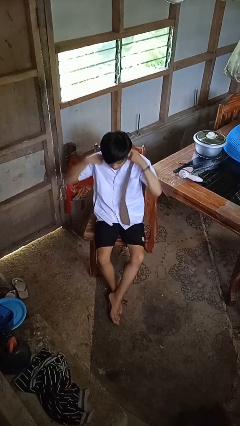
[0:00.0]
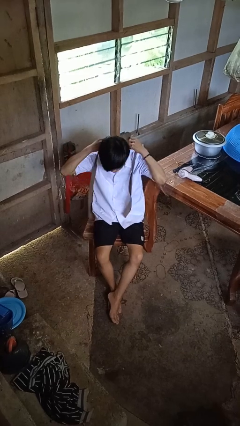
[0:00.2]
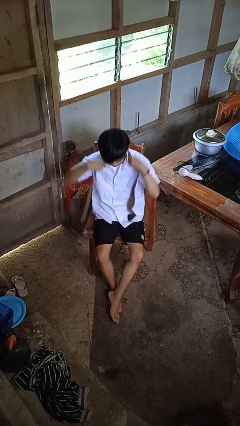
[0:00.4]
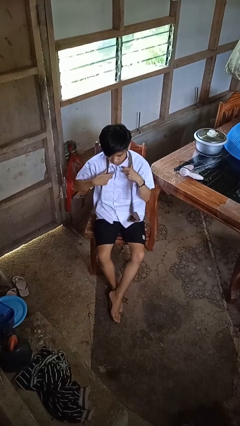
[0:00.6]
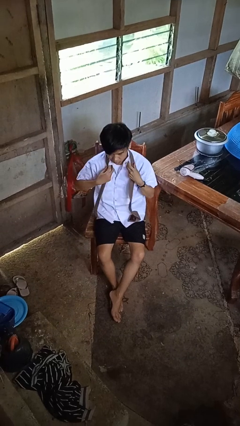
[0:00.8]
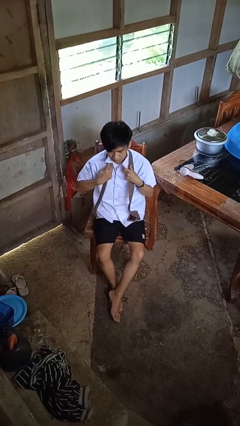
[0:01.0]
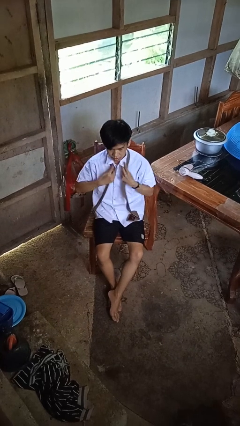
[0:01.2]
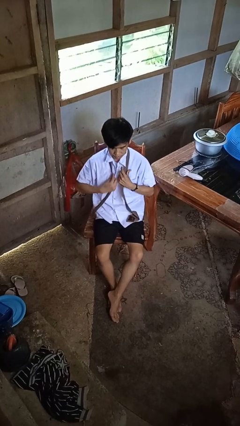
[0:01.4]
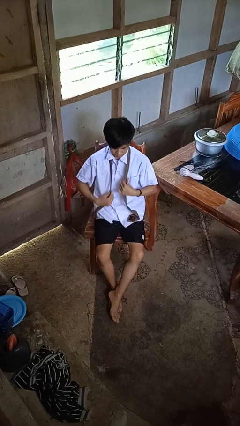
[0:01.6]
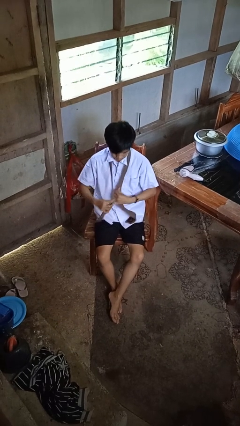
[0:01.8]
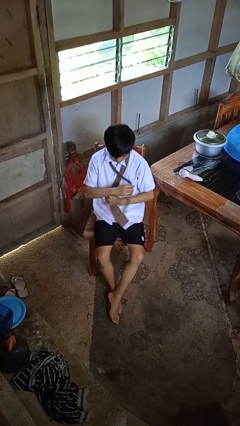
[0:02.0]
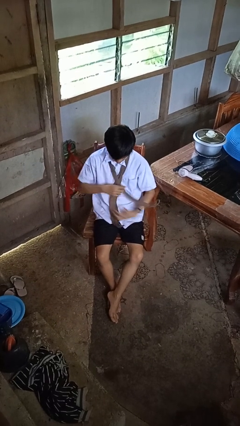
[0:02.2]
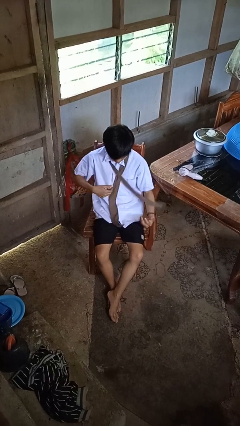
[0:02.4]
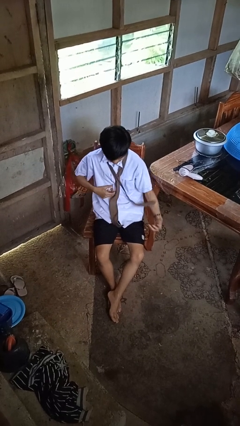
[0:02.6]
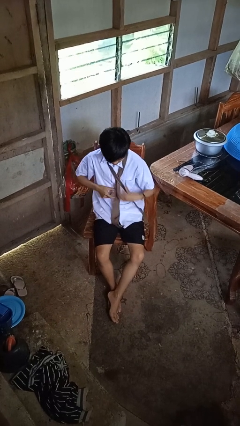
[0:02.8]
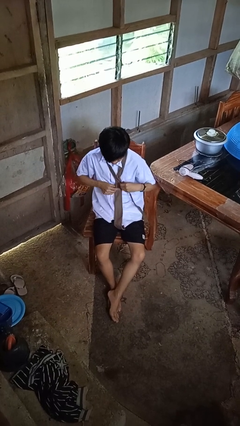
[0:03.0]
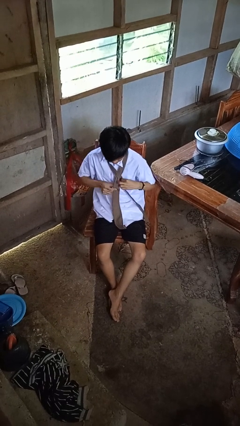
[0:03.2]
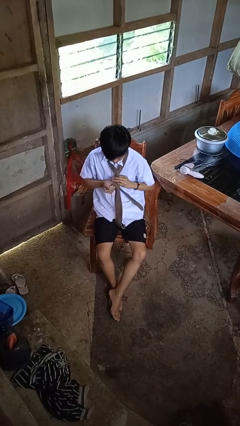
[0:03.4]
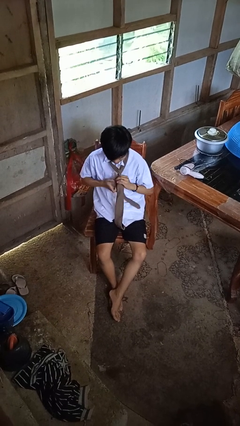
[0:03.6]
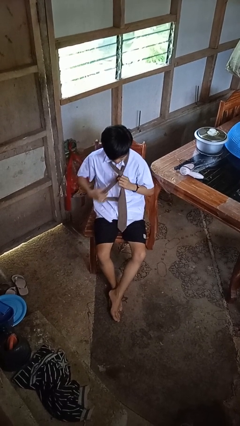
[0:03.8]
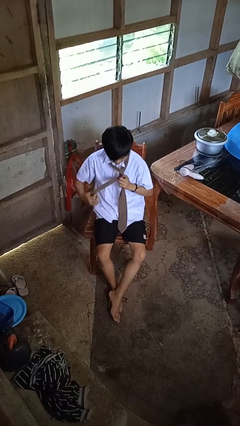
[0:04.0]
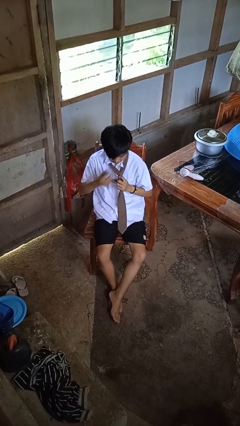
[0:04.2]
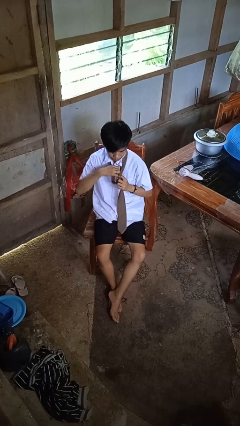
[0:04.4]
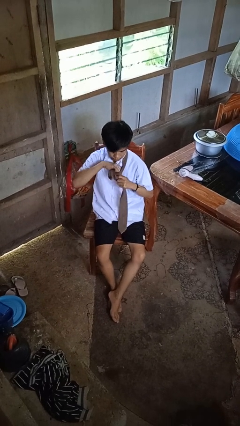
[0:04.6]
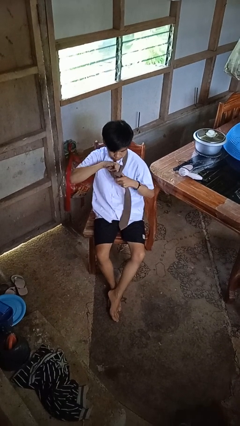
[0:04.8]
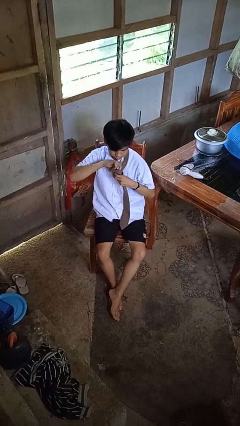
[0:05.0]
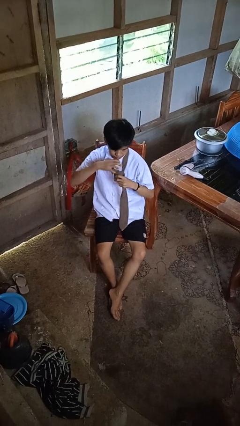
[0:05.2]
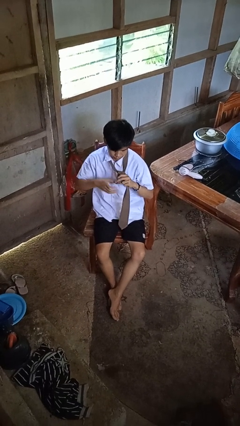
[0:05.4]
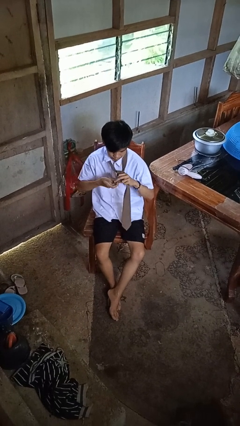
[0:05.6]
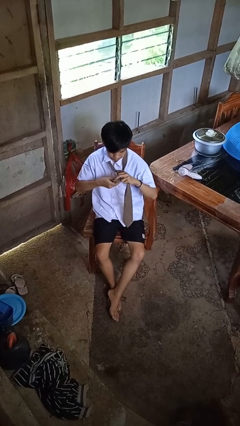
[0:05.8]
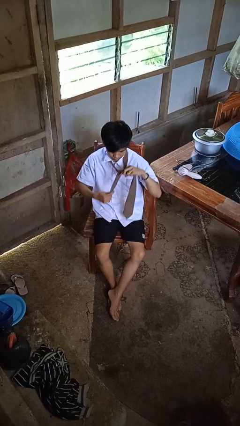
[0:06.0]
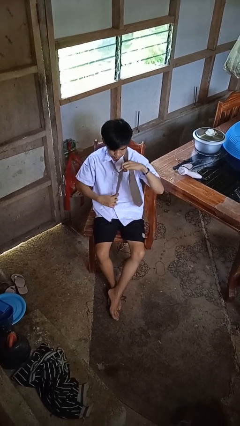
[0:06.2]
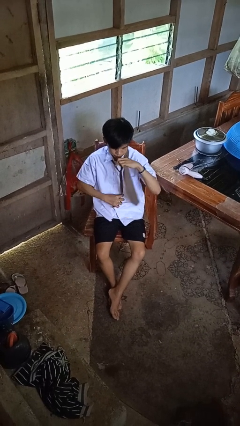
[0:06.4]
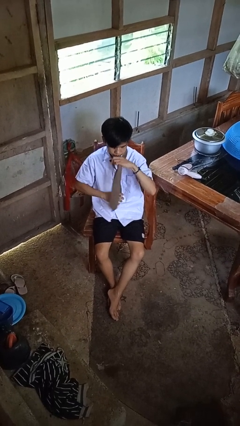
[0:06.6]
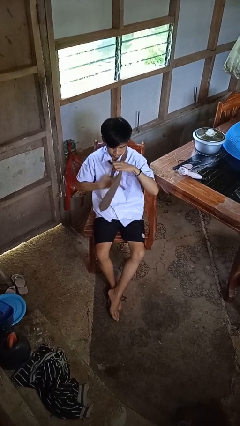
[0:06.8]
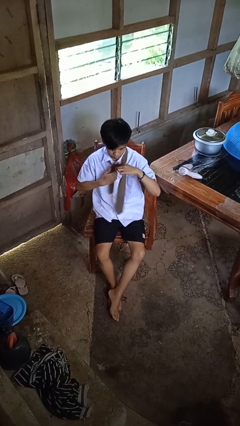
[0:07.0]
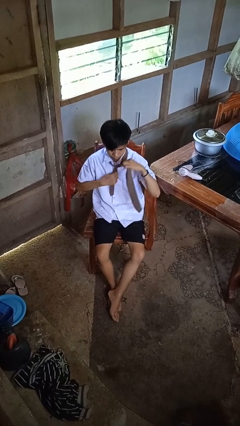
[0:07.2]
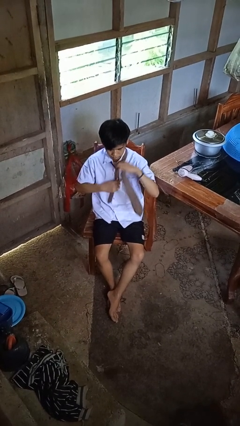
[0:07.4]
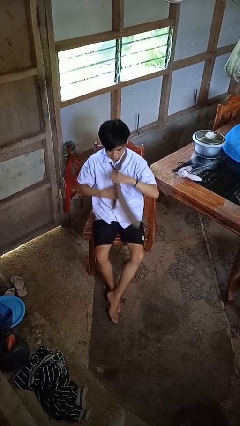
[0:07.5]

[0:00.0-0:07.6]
person puts on necktie

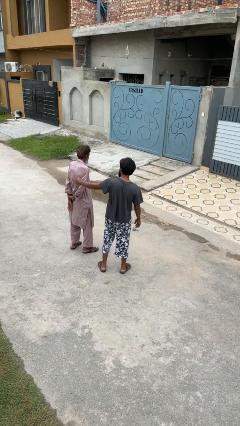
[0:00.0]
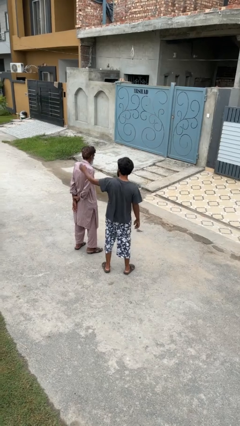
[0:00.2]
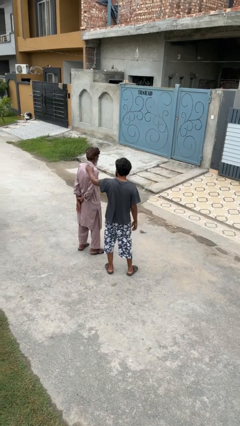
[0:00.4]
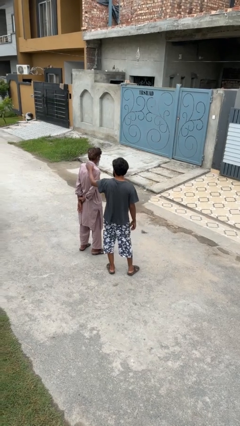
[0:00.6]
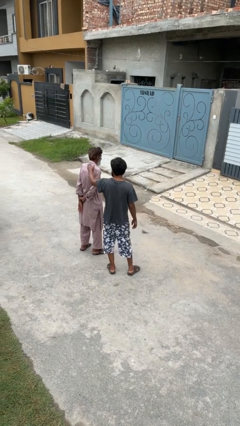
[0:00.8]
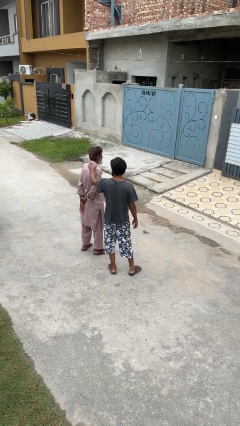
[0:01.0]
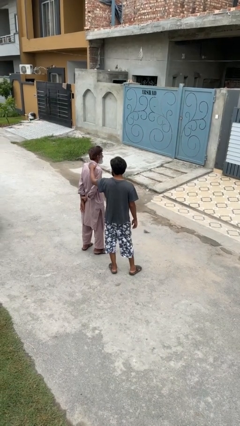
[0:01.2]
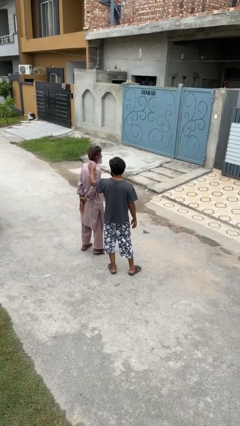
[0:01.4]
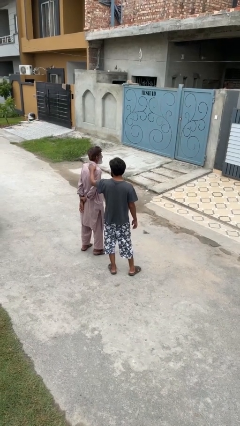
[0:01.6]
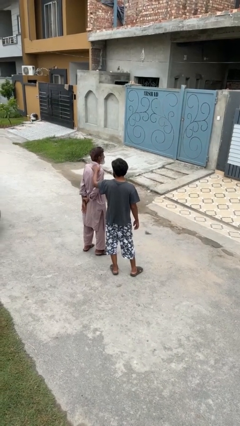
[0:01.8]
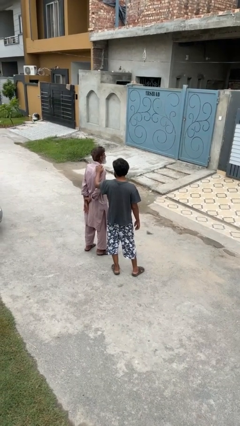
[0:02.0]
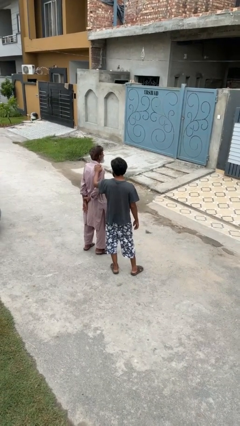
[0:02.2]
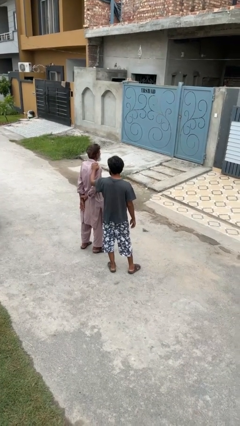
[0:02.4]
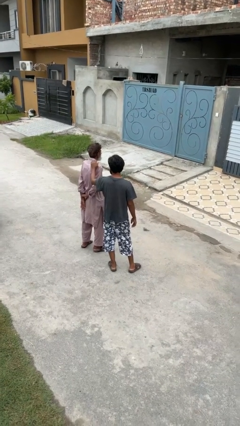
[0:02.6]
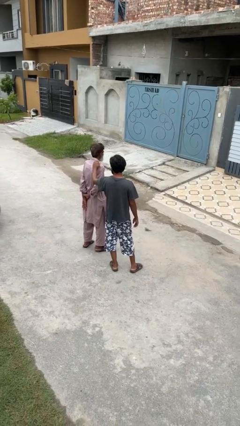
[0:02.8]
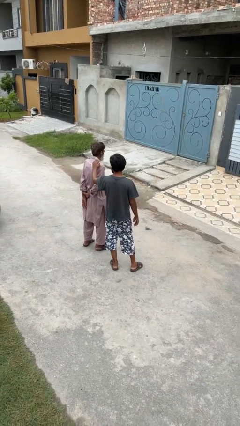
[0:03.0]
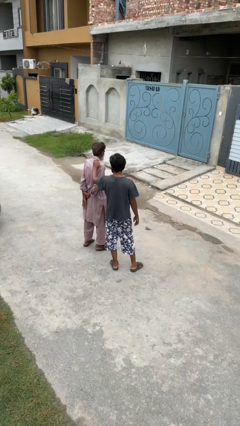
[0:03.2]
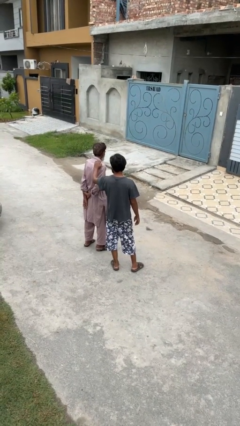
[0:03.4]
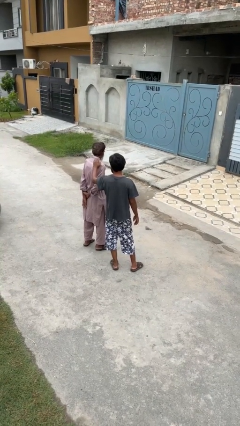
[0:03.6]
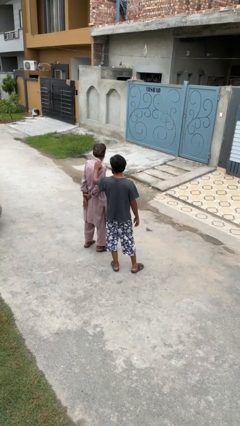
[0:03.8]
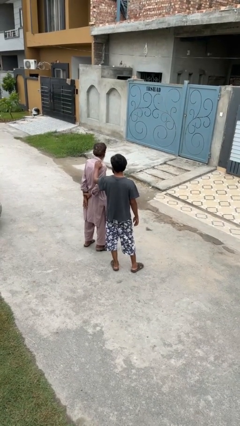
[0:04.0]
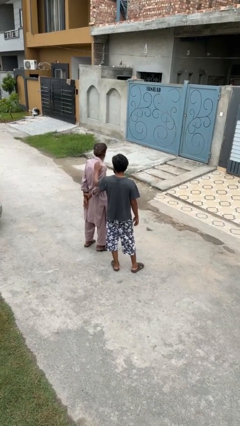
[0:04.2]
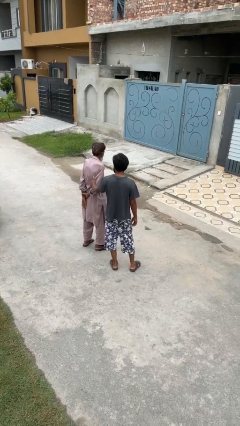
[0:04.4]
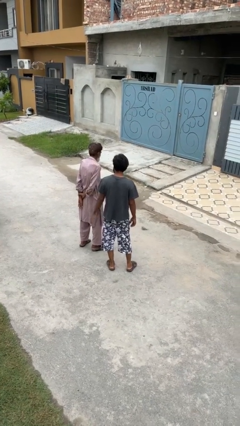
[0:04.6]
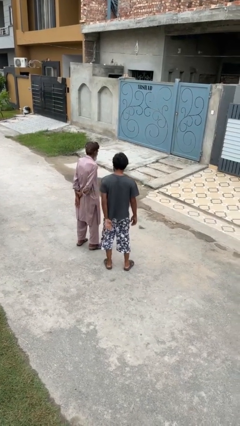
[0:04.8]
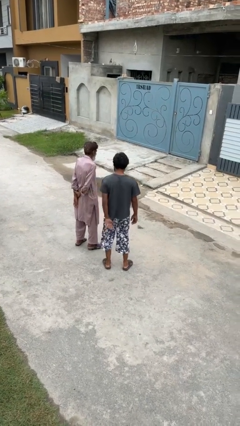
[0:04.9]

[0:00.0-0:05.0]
person pounds shoulders of person

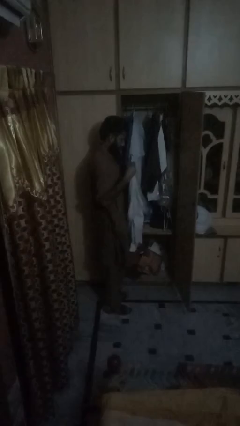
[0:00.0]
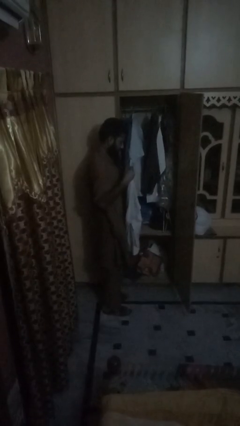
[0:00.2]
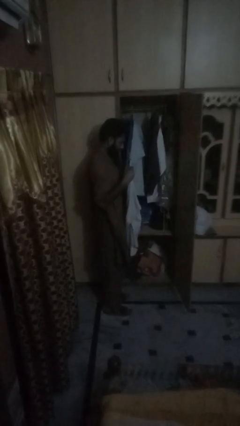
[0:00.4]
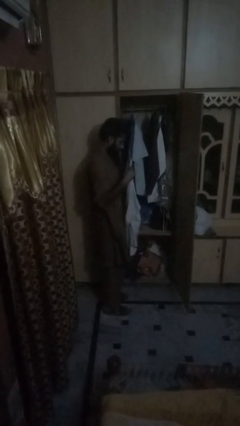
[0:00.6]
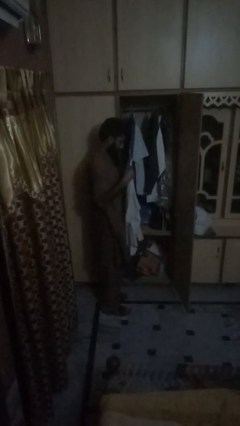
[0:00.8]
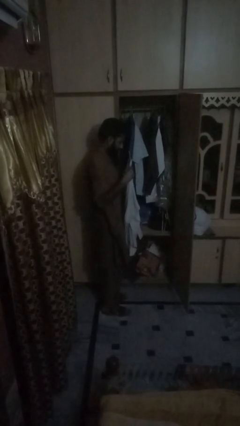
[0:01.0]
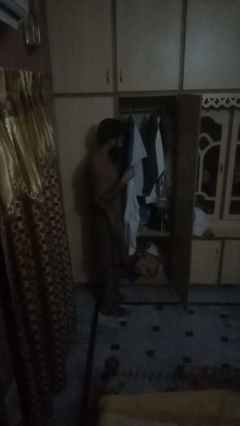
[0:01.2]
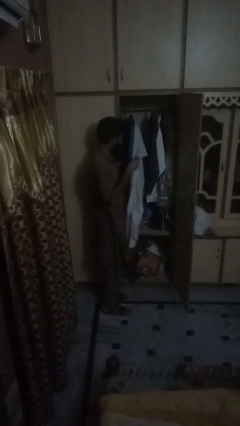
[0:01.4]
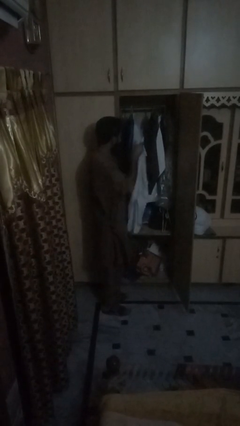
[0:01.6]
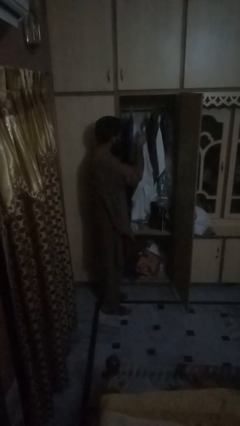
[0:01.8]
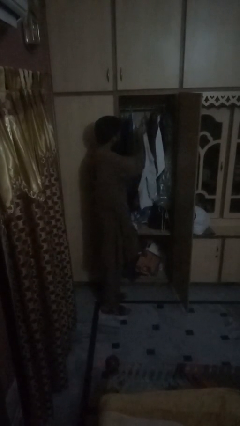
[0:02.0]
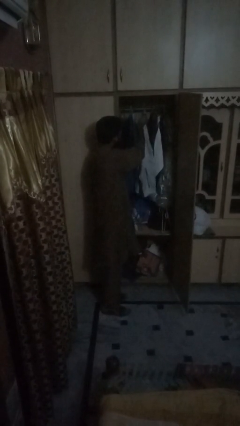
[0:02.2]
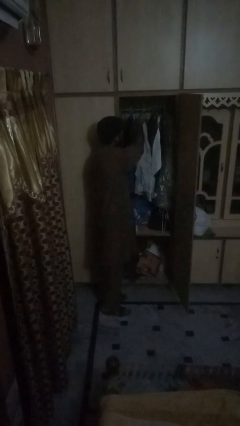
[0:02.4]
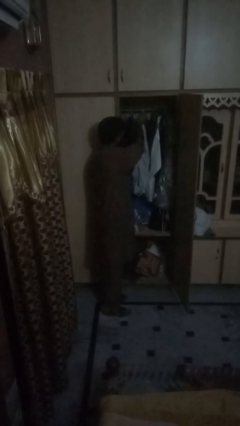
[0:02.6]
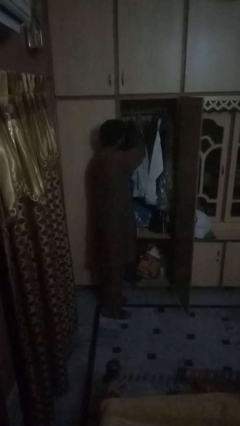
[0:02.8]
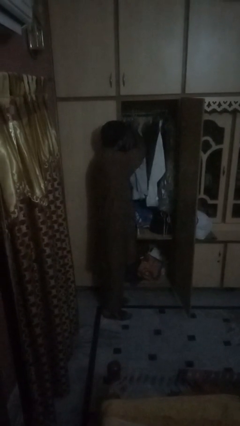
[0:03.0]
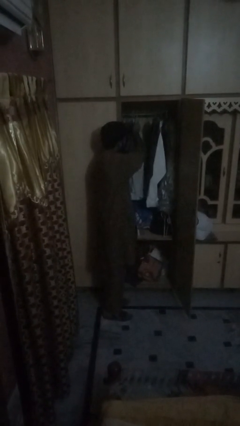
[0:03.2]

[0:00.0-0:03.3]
person takes clothes from dresser

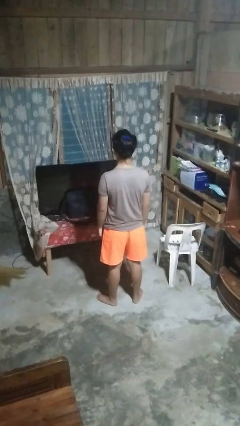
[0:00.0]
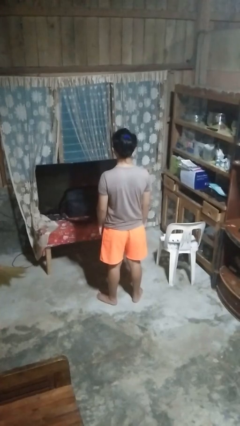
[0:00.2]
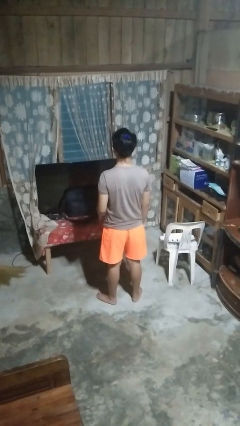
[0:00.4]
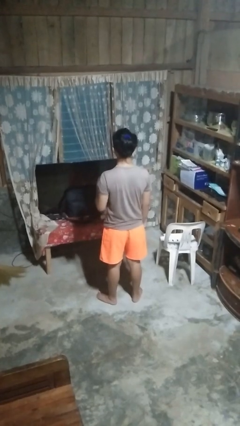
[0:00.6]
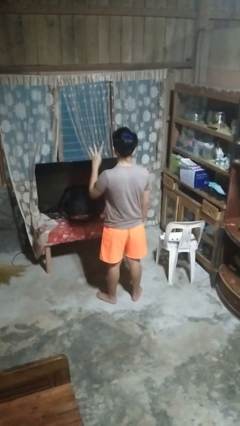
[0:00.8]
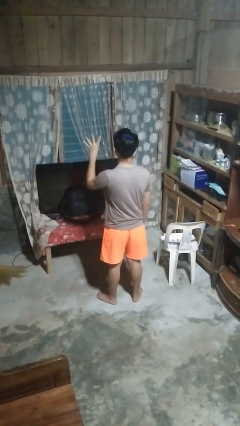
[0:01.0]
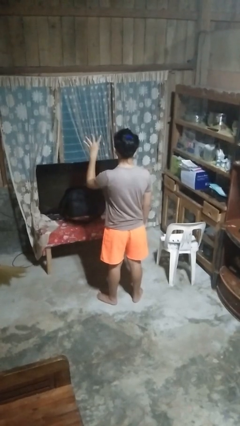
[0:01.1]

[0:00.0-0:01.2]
person gestures number four

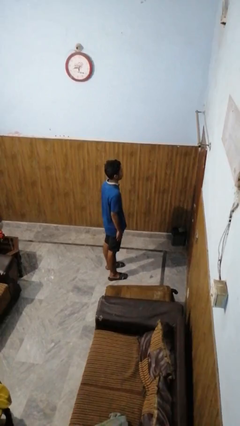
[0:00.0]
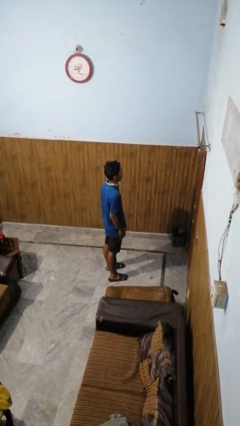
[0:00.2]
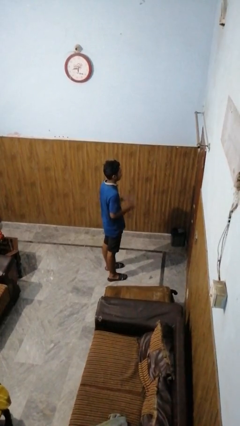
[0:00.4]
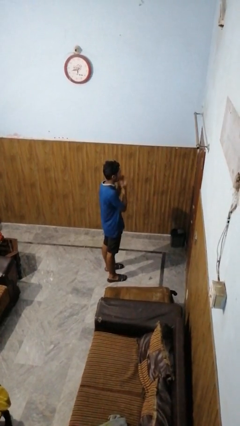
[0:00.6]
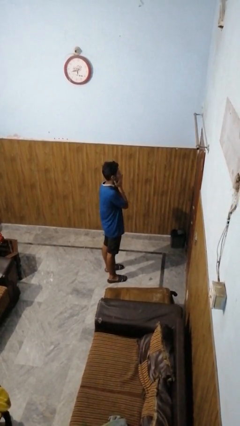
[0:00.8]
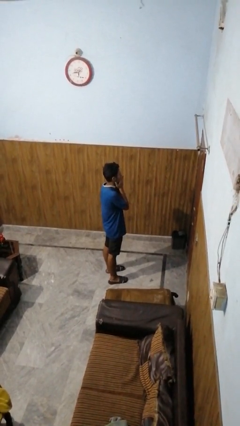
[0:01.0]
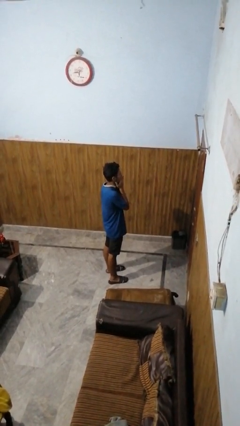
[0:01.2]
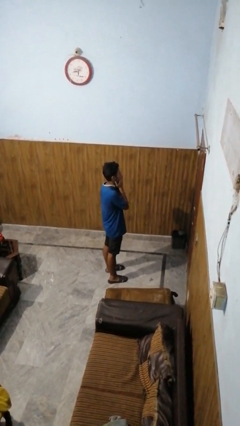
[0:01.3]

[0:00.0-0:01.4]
person covers face with hands
